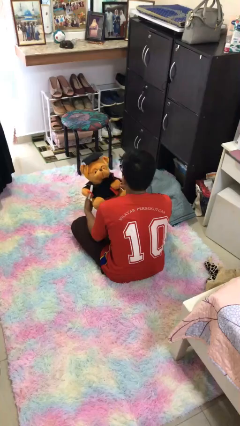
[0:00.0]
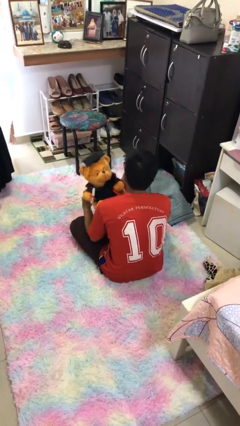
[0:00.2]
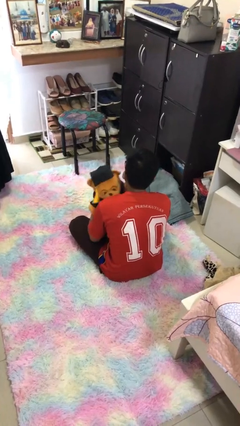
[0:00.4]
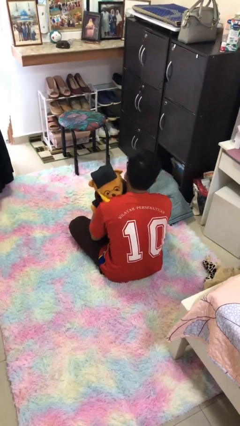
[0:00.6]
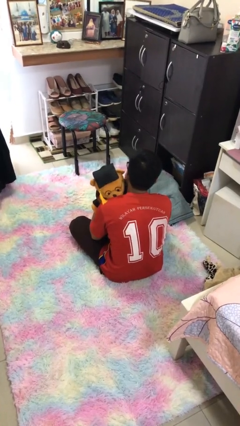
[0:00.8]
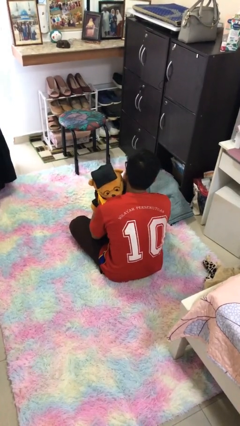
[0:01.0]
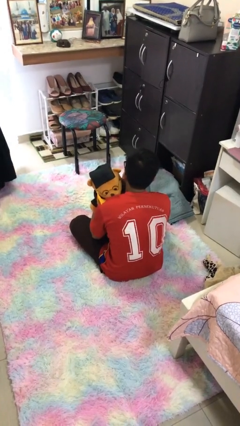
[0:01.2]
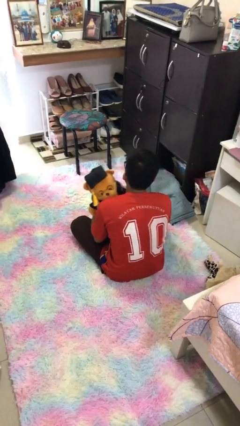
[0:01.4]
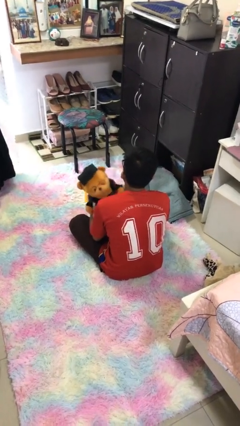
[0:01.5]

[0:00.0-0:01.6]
person hugs stuffed animal

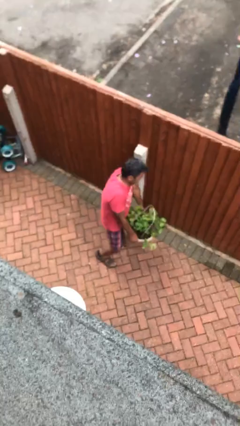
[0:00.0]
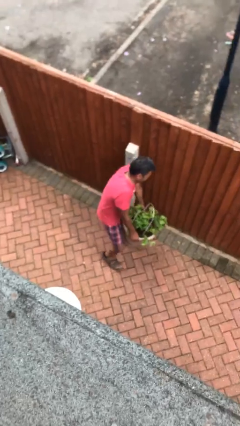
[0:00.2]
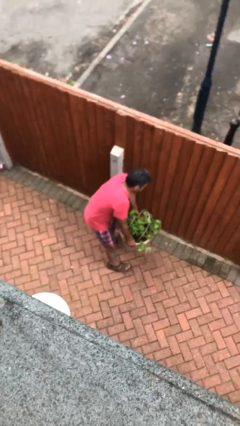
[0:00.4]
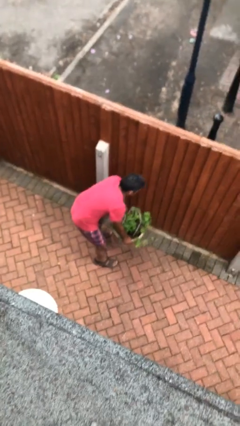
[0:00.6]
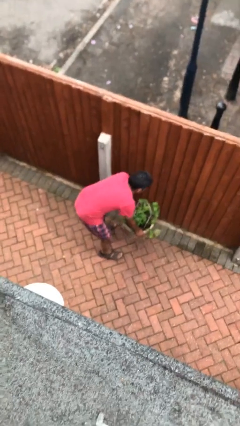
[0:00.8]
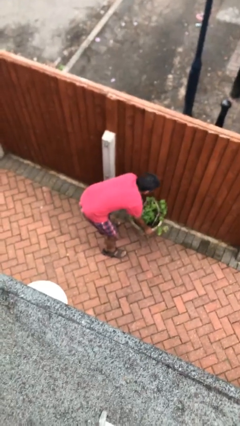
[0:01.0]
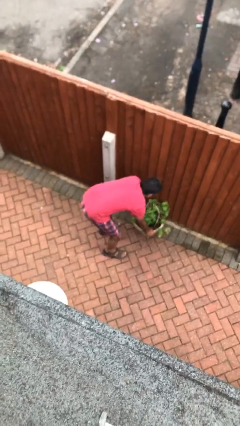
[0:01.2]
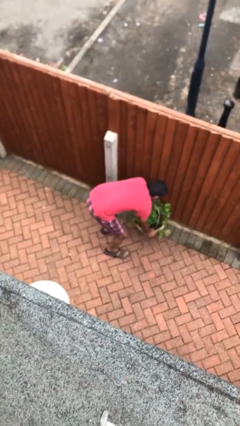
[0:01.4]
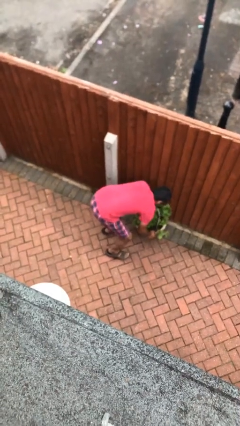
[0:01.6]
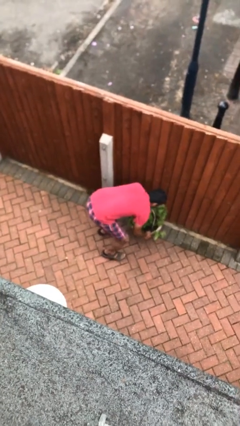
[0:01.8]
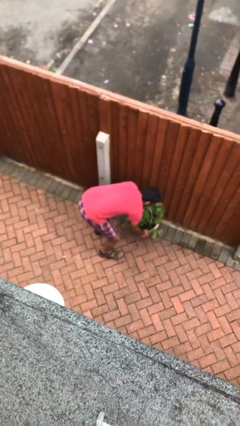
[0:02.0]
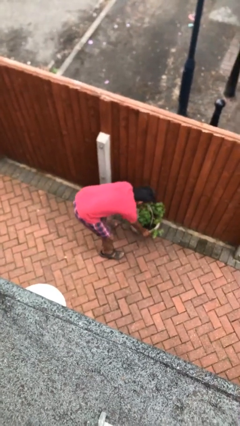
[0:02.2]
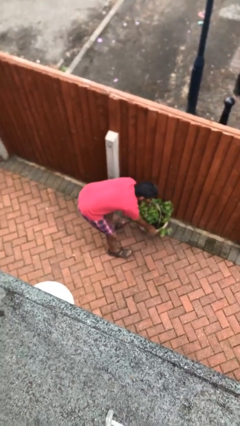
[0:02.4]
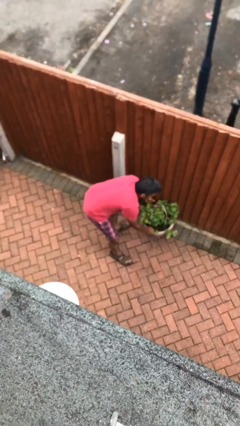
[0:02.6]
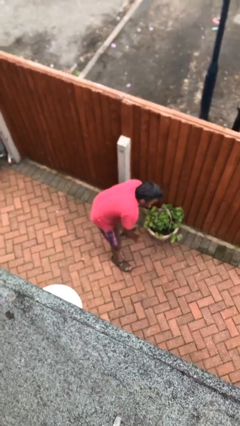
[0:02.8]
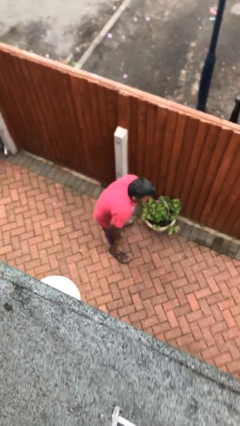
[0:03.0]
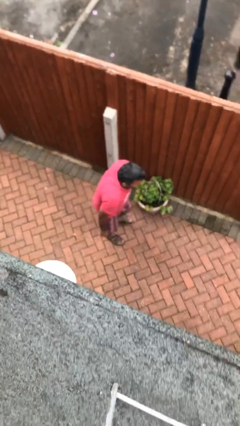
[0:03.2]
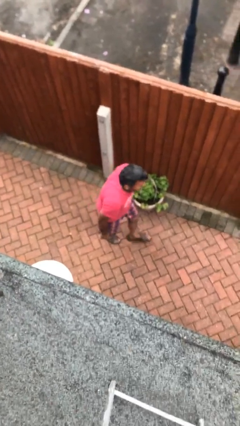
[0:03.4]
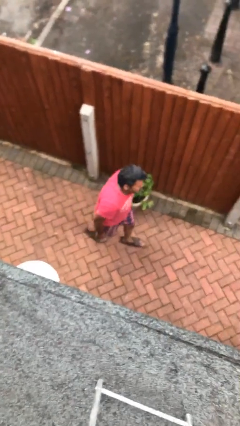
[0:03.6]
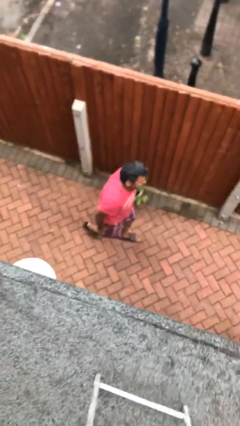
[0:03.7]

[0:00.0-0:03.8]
person puts down object on floor

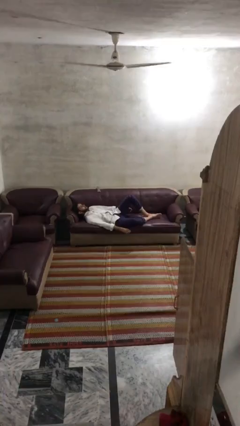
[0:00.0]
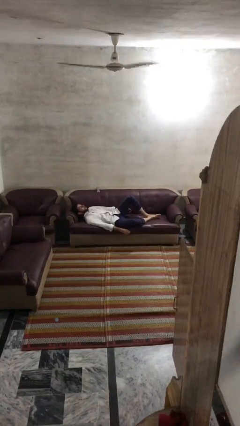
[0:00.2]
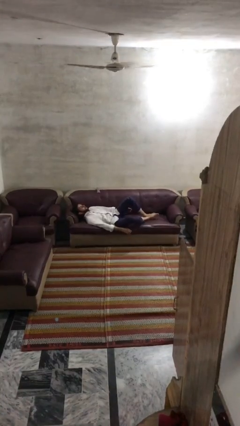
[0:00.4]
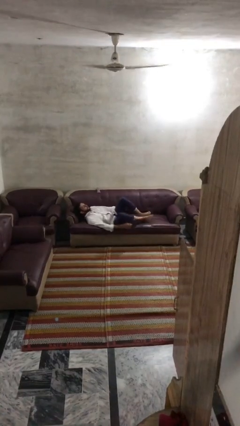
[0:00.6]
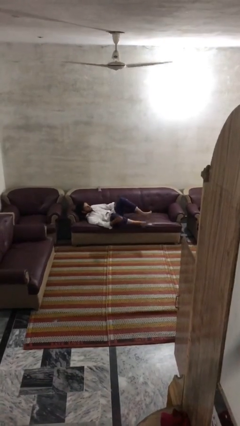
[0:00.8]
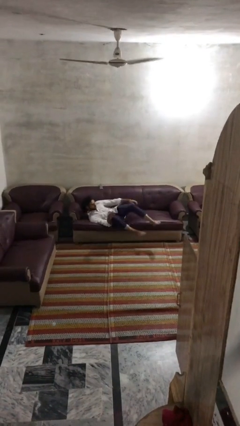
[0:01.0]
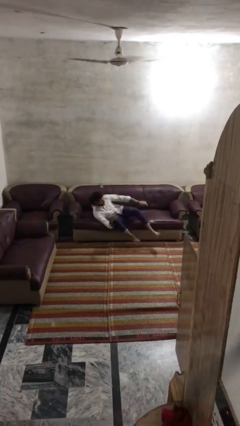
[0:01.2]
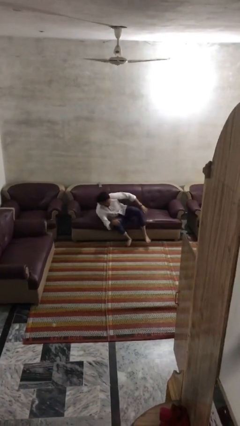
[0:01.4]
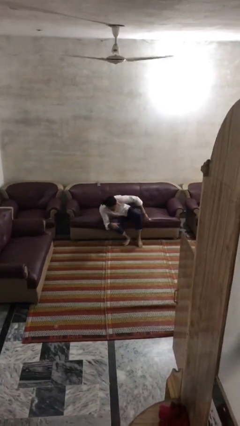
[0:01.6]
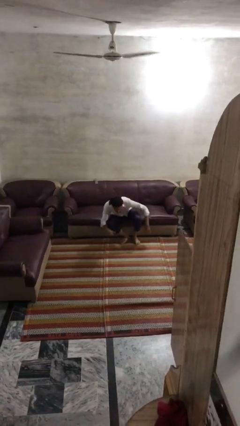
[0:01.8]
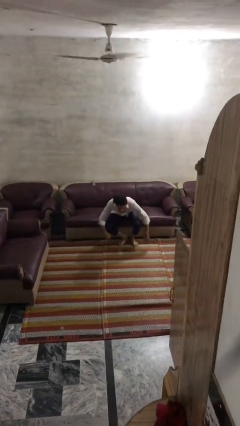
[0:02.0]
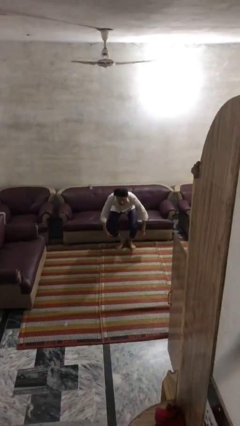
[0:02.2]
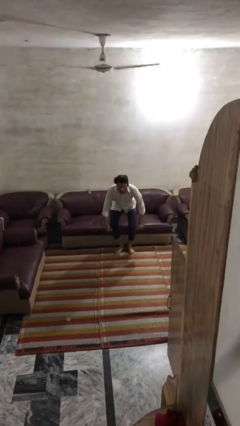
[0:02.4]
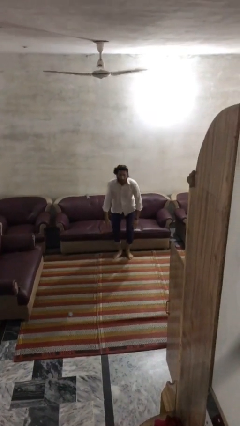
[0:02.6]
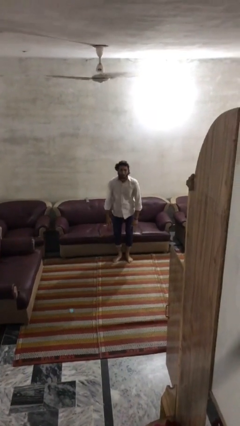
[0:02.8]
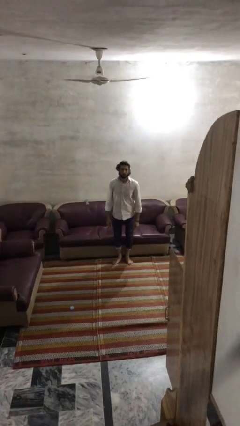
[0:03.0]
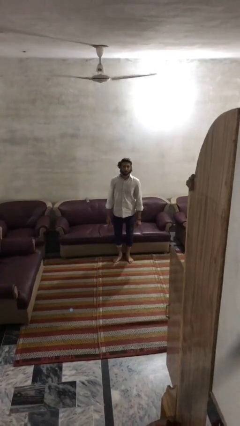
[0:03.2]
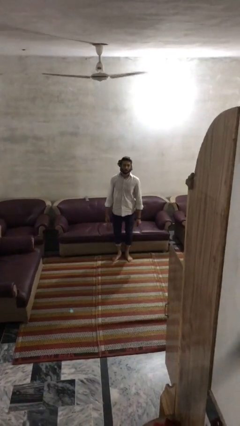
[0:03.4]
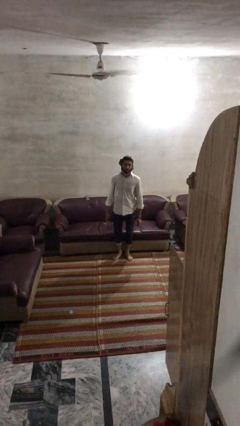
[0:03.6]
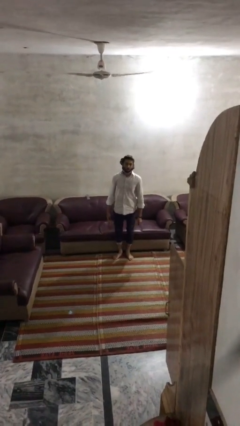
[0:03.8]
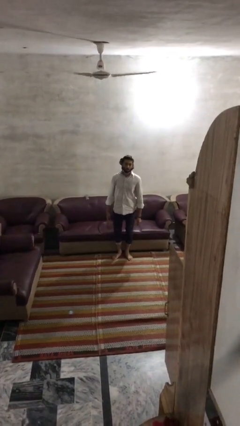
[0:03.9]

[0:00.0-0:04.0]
person stands up

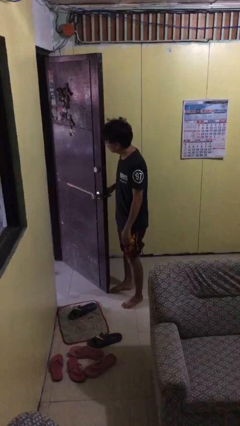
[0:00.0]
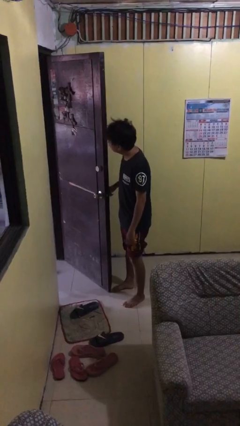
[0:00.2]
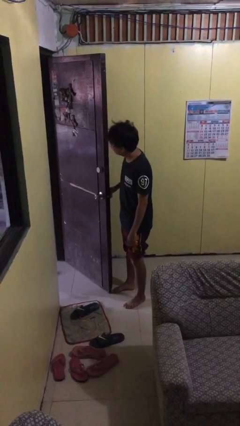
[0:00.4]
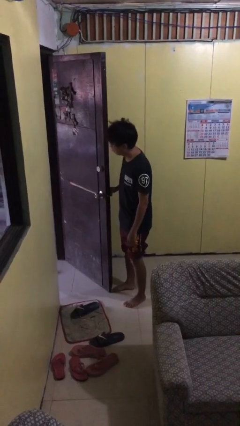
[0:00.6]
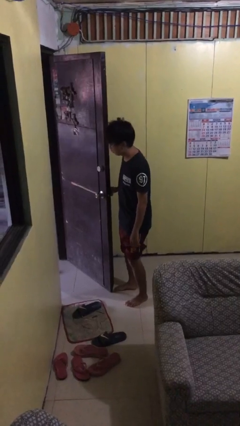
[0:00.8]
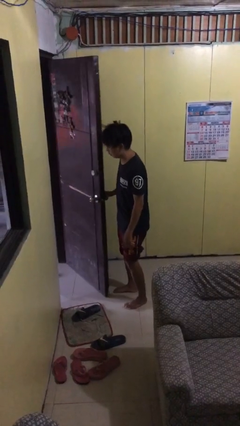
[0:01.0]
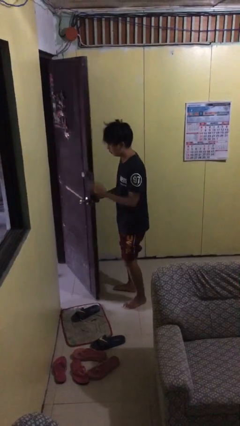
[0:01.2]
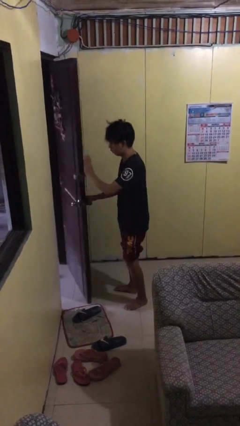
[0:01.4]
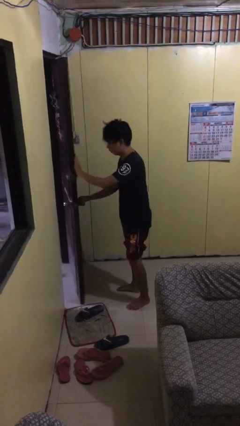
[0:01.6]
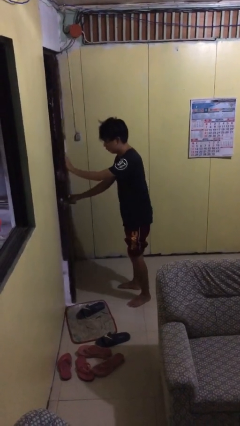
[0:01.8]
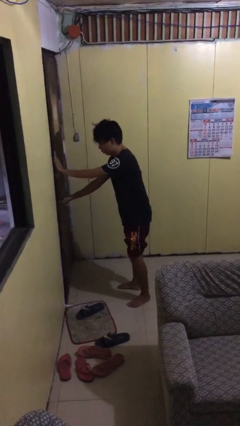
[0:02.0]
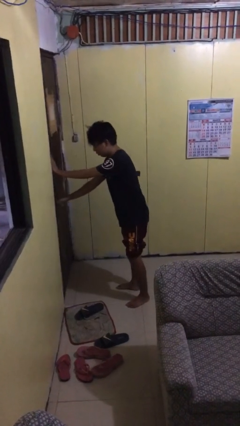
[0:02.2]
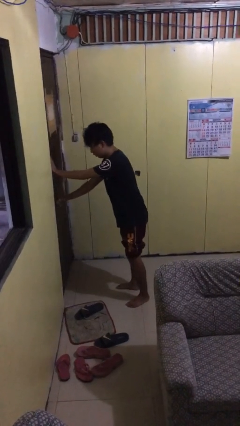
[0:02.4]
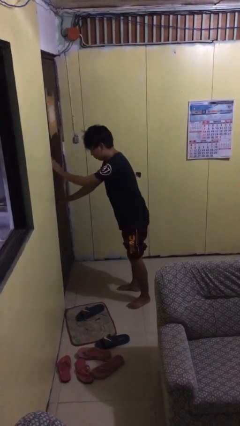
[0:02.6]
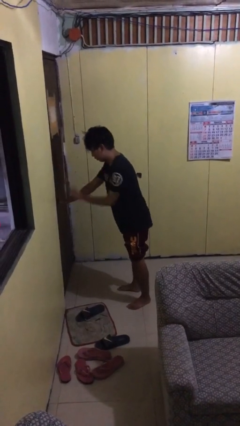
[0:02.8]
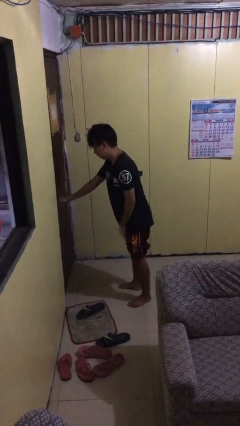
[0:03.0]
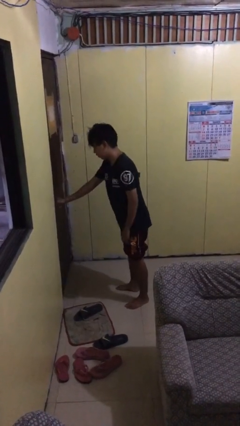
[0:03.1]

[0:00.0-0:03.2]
person closes facility door

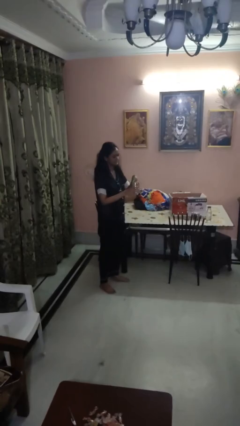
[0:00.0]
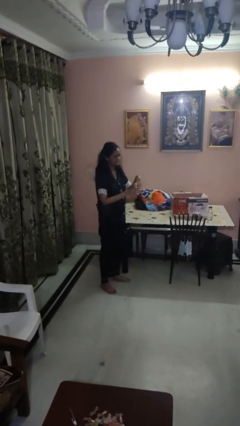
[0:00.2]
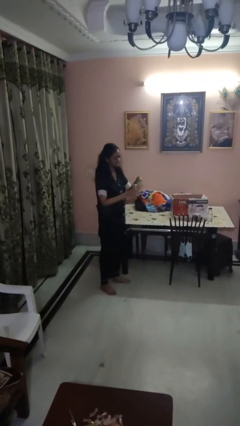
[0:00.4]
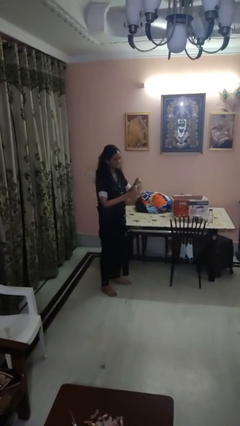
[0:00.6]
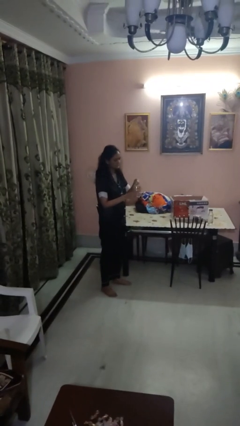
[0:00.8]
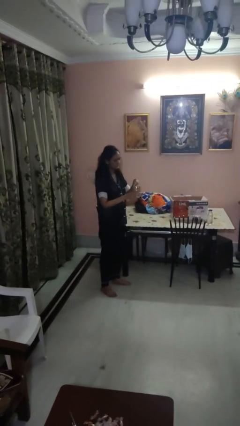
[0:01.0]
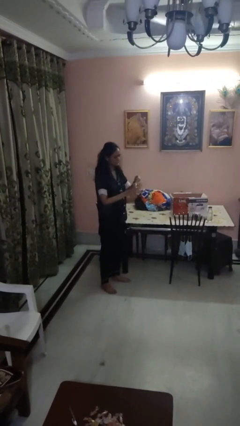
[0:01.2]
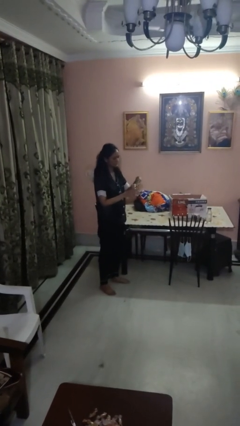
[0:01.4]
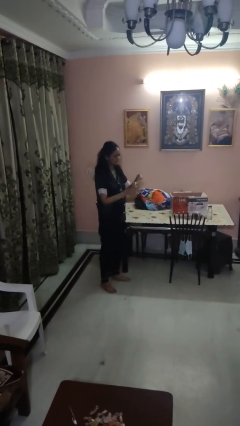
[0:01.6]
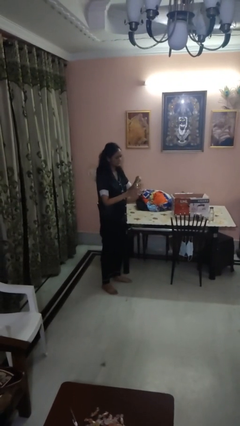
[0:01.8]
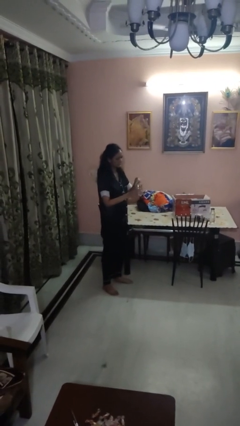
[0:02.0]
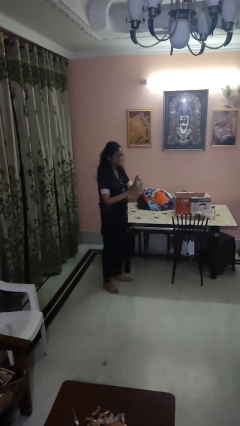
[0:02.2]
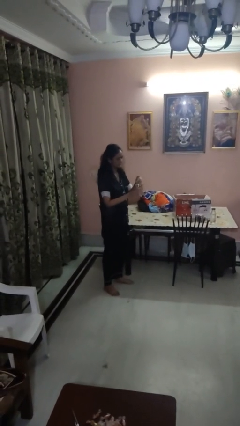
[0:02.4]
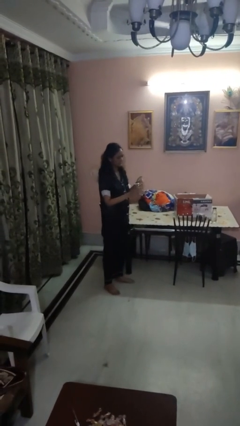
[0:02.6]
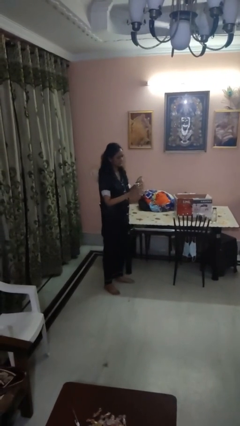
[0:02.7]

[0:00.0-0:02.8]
person opens can with can opener

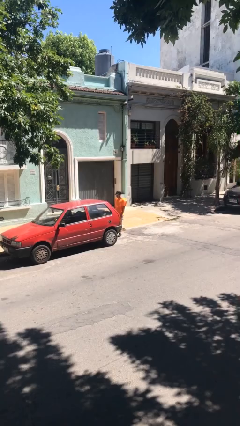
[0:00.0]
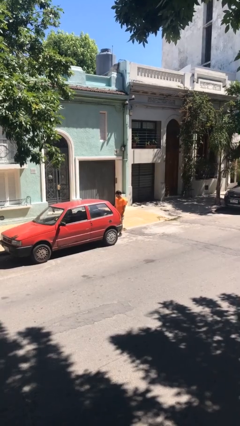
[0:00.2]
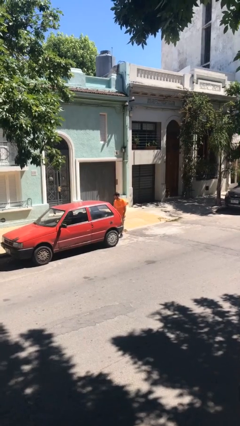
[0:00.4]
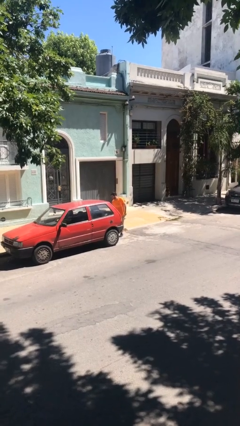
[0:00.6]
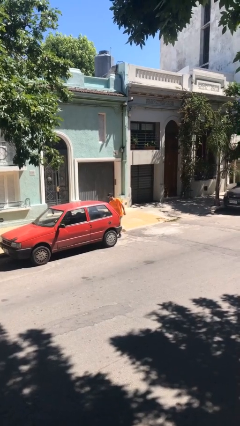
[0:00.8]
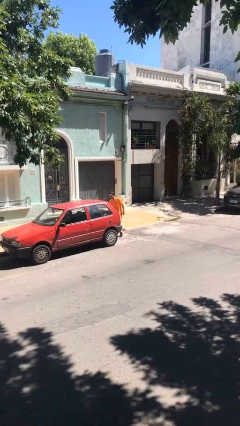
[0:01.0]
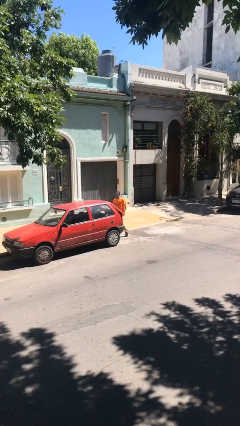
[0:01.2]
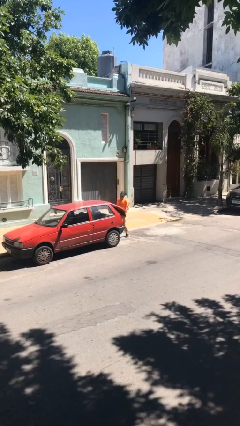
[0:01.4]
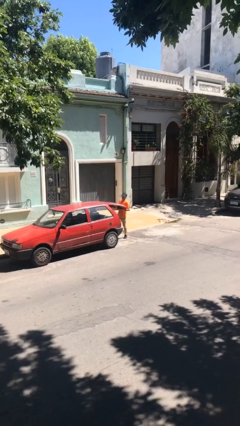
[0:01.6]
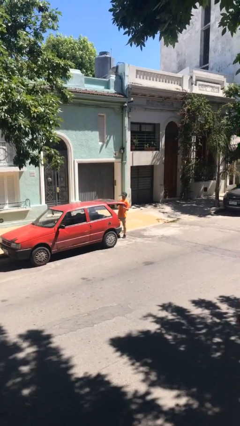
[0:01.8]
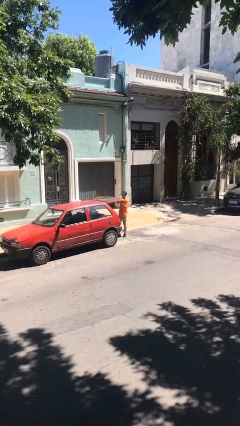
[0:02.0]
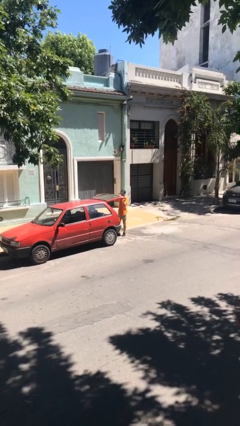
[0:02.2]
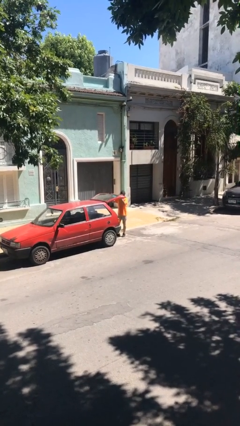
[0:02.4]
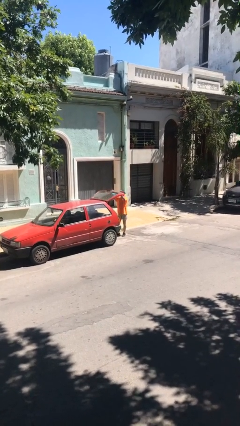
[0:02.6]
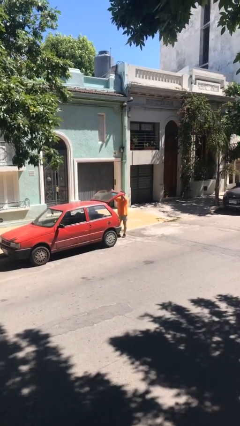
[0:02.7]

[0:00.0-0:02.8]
person opens car trunk
